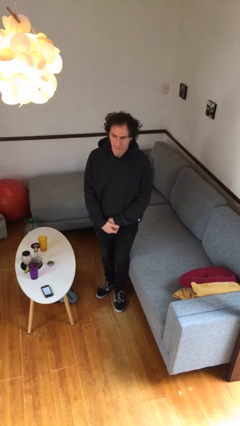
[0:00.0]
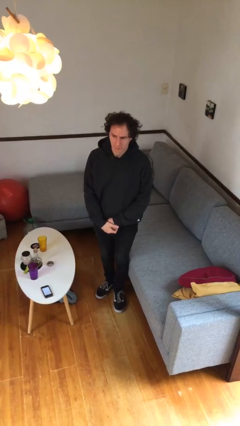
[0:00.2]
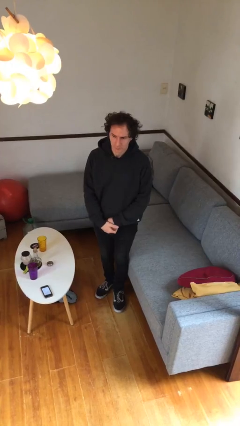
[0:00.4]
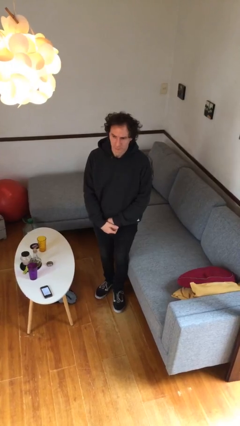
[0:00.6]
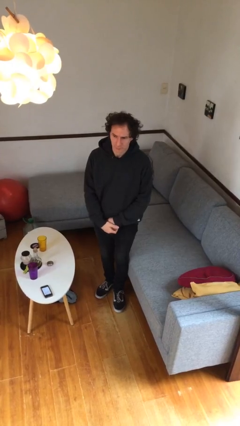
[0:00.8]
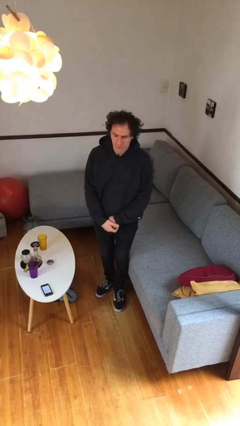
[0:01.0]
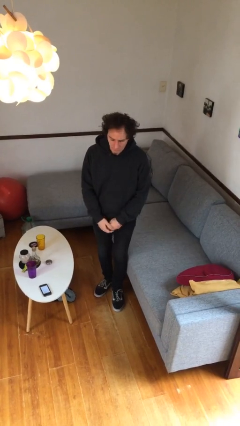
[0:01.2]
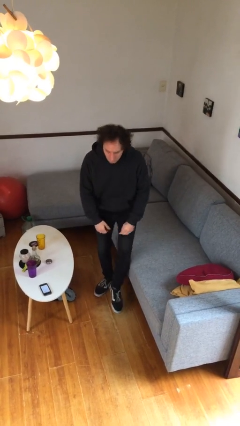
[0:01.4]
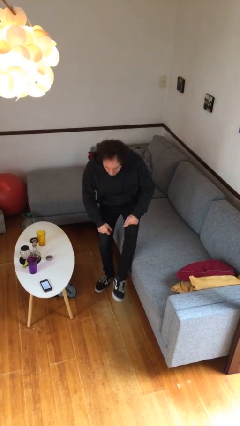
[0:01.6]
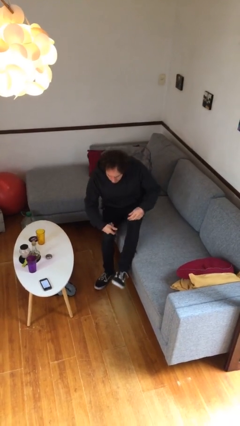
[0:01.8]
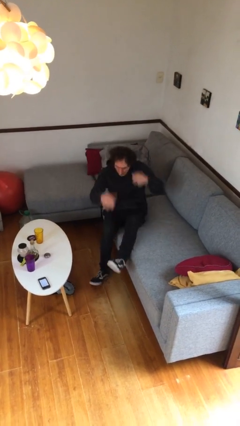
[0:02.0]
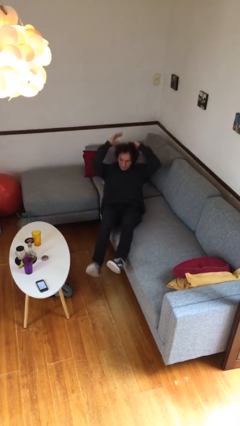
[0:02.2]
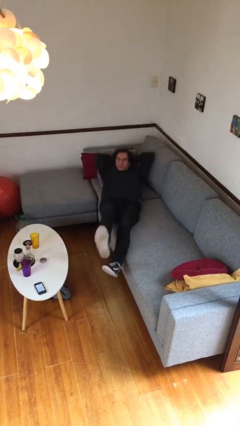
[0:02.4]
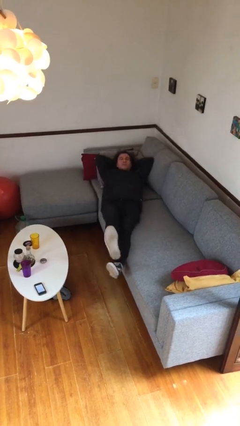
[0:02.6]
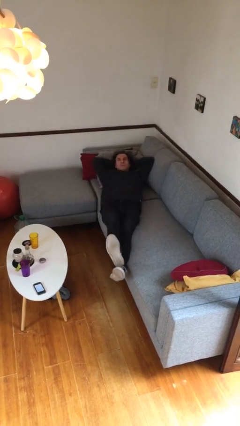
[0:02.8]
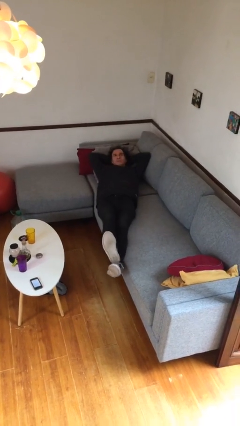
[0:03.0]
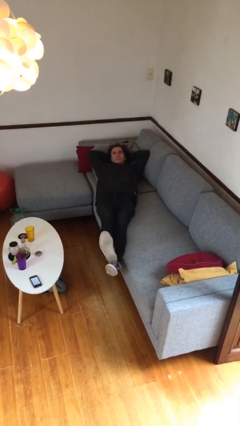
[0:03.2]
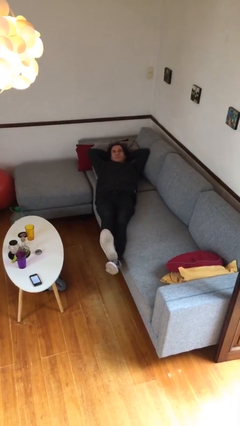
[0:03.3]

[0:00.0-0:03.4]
person lies down on couch

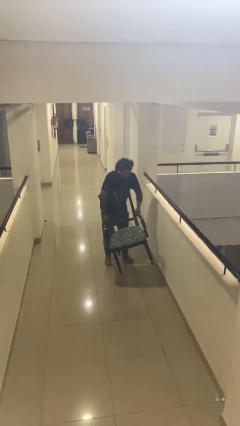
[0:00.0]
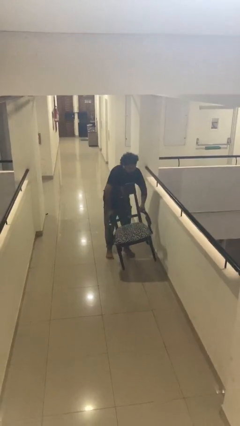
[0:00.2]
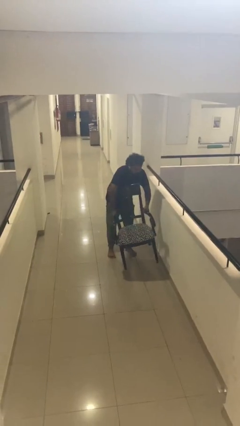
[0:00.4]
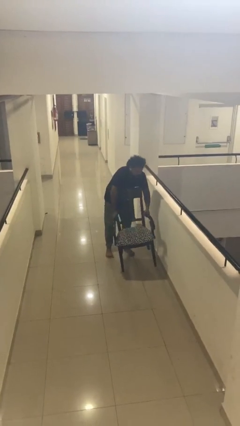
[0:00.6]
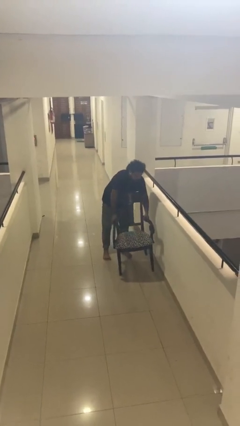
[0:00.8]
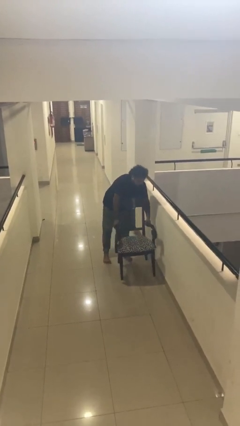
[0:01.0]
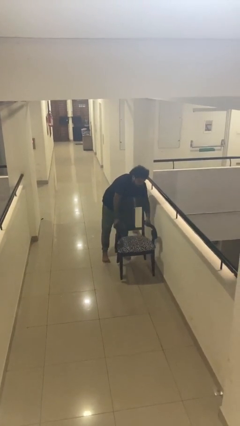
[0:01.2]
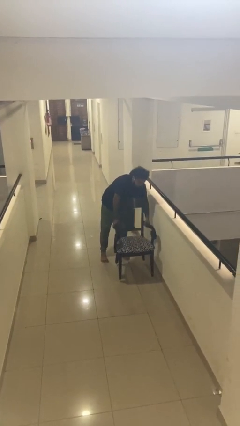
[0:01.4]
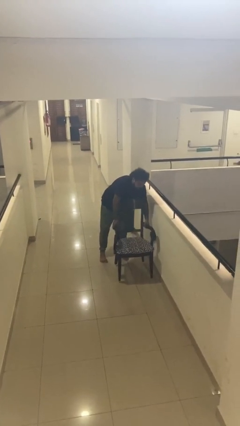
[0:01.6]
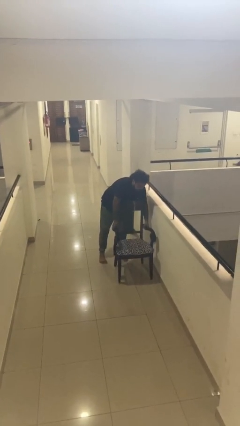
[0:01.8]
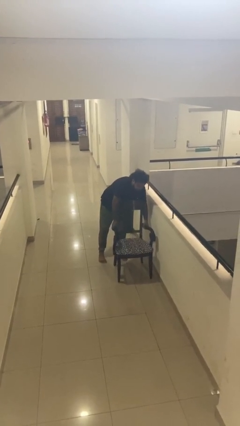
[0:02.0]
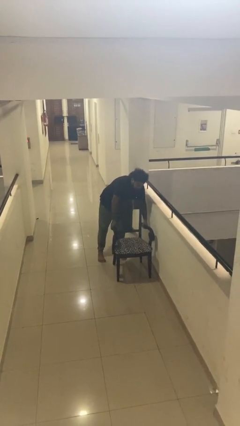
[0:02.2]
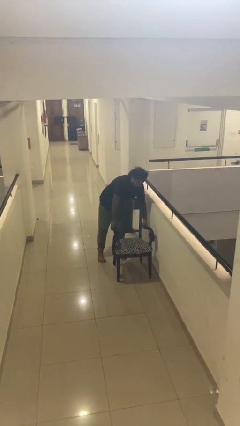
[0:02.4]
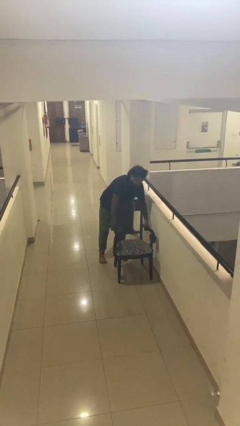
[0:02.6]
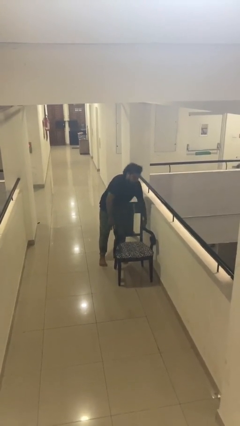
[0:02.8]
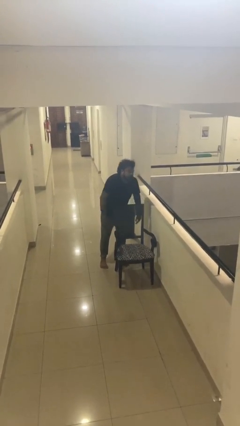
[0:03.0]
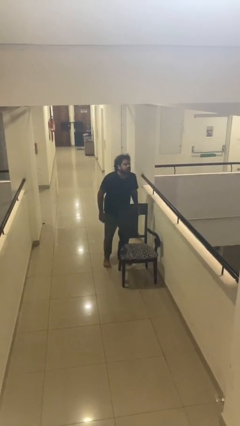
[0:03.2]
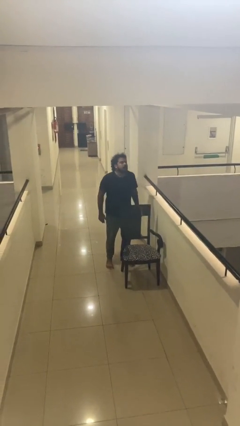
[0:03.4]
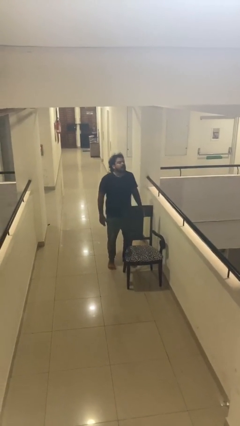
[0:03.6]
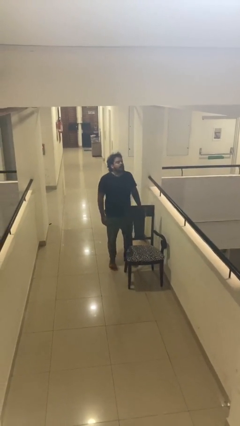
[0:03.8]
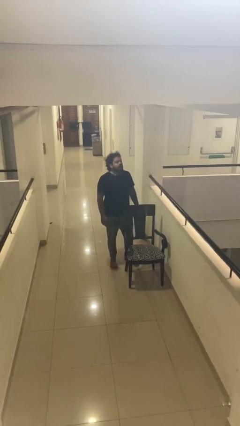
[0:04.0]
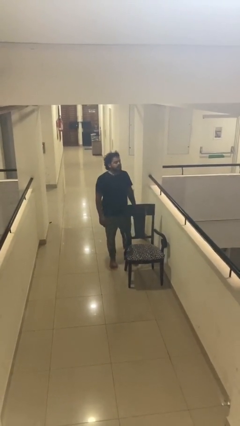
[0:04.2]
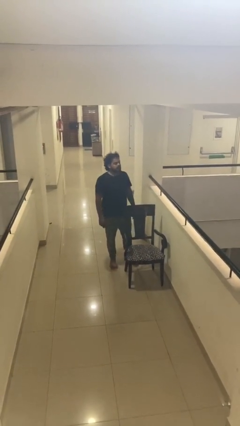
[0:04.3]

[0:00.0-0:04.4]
person puts down object on floor

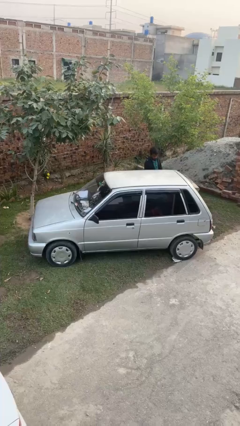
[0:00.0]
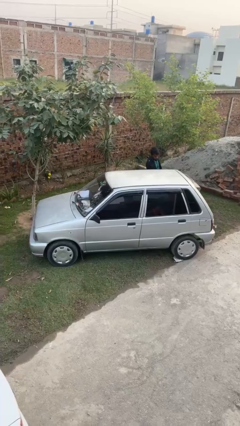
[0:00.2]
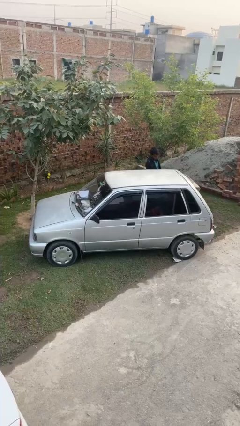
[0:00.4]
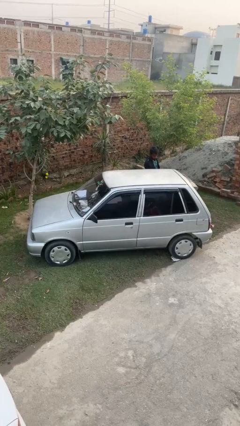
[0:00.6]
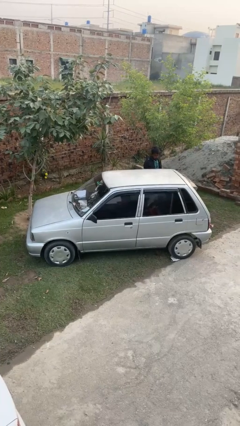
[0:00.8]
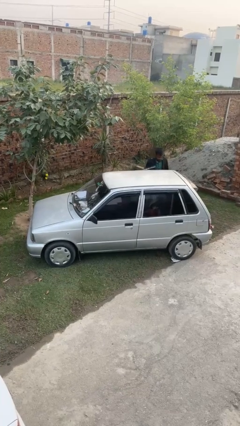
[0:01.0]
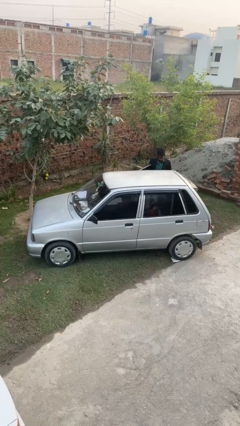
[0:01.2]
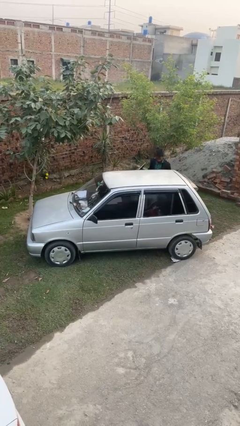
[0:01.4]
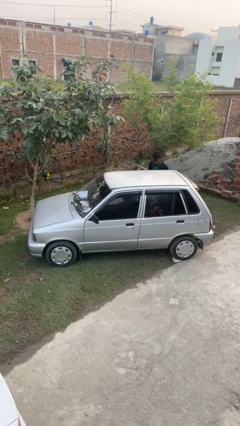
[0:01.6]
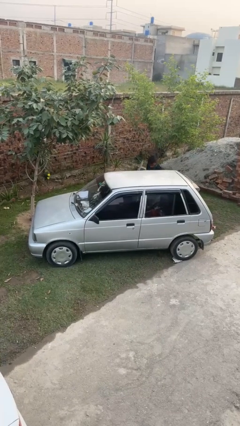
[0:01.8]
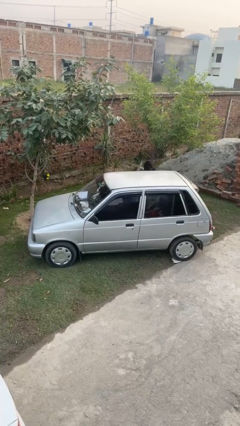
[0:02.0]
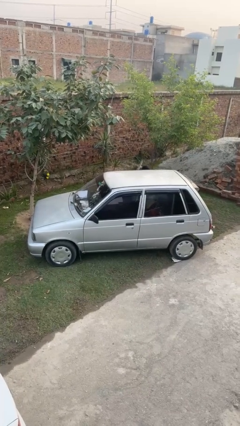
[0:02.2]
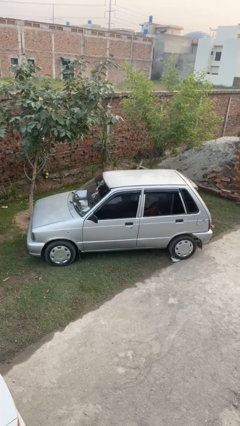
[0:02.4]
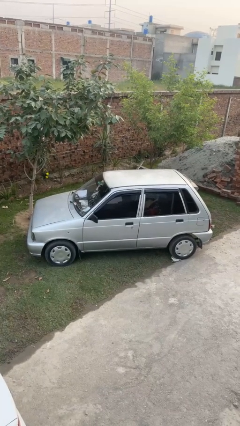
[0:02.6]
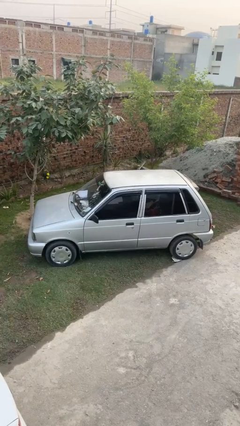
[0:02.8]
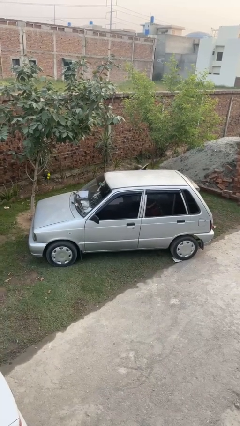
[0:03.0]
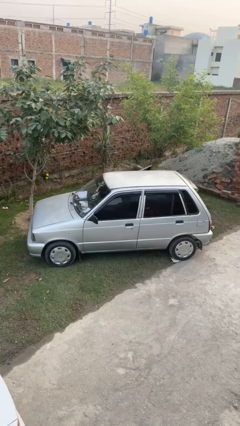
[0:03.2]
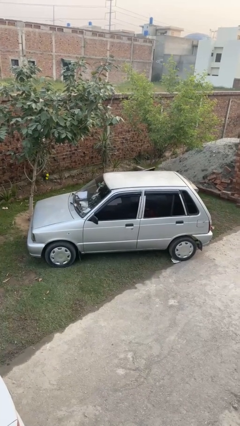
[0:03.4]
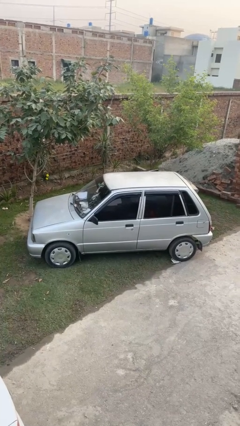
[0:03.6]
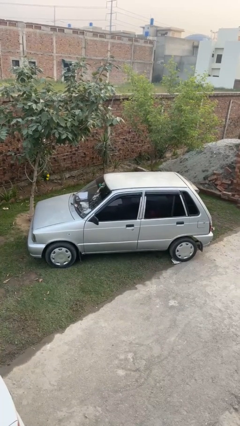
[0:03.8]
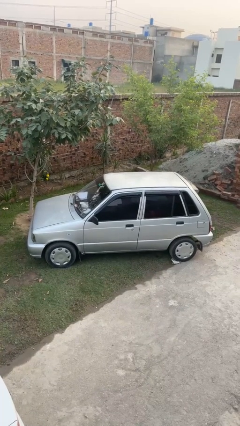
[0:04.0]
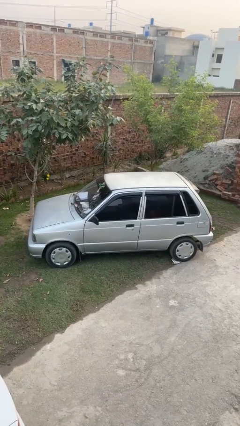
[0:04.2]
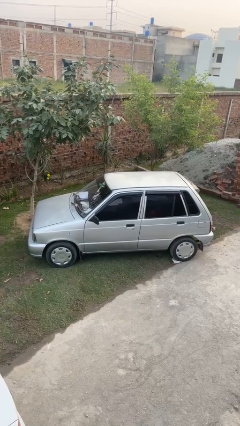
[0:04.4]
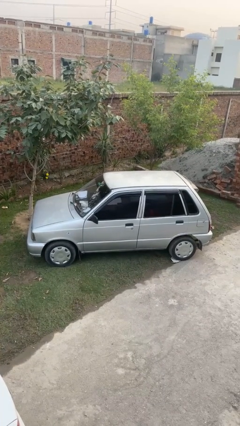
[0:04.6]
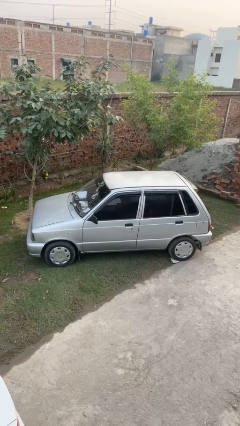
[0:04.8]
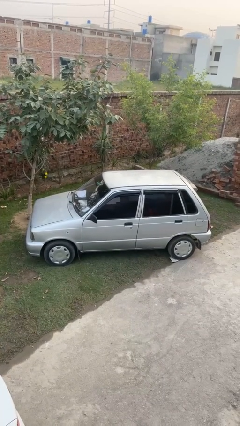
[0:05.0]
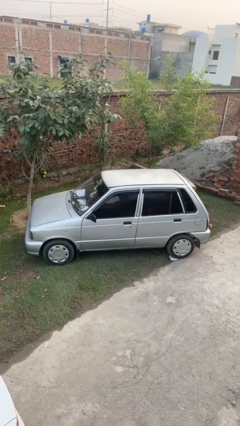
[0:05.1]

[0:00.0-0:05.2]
car picks up person

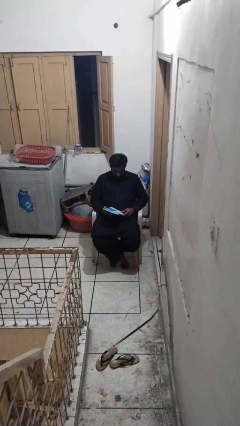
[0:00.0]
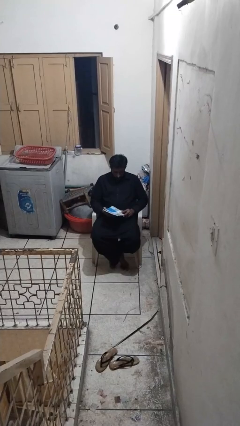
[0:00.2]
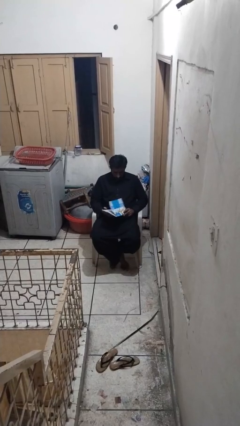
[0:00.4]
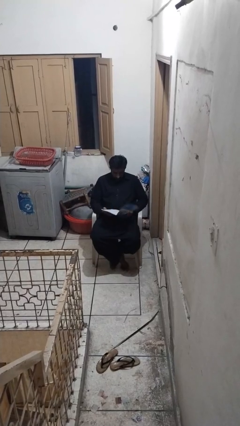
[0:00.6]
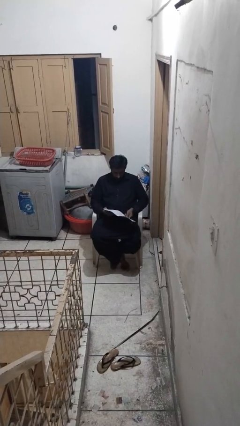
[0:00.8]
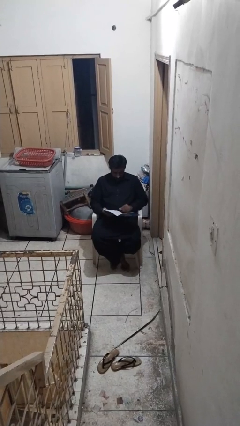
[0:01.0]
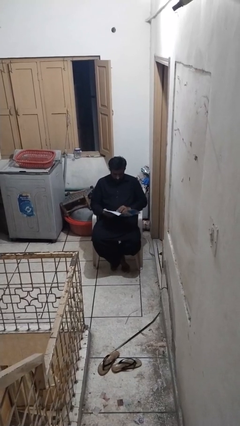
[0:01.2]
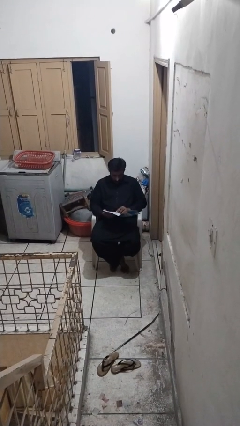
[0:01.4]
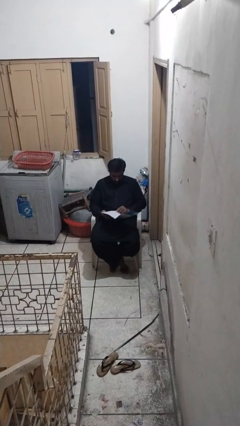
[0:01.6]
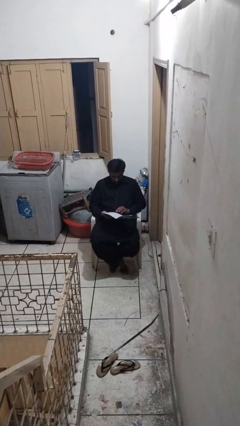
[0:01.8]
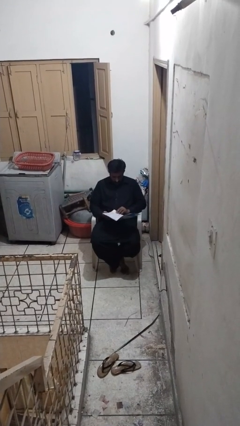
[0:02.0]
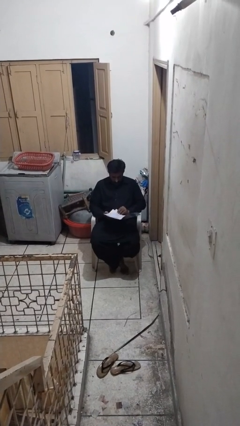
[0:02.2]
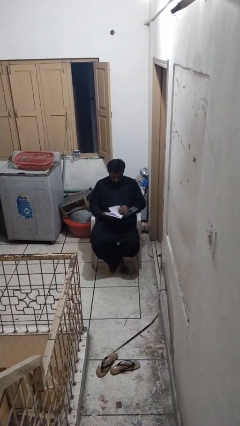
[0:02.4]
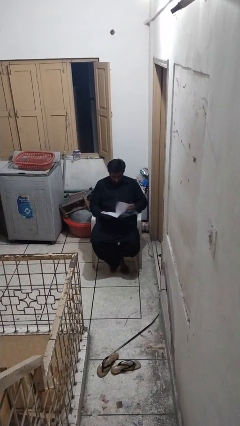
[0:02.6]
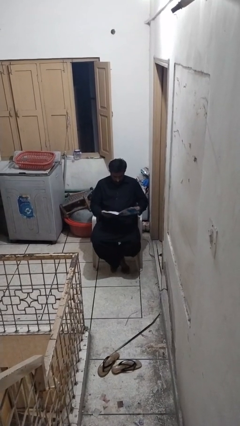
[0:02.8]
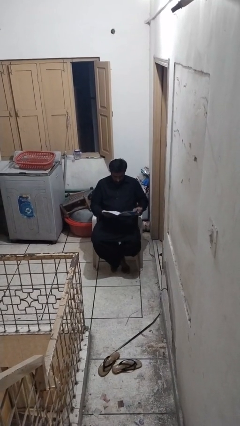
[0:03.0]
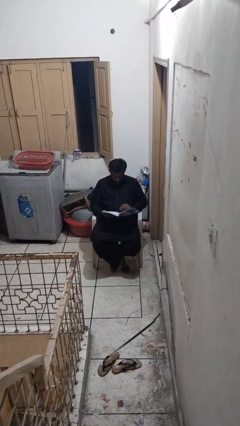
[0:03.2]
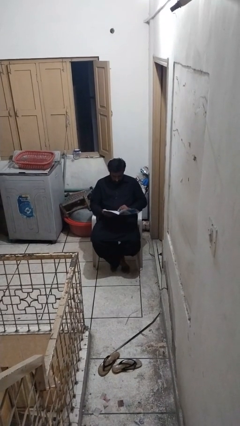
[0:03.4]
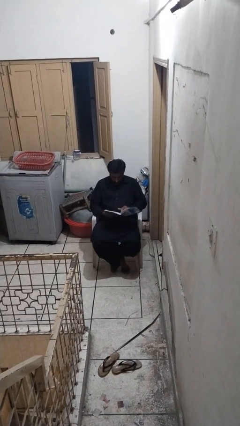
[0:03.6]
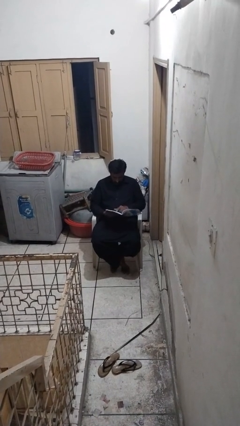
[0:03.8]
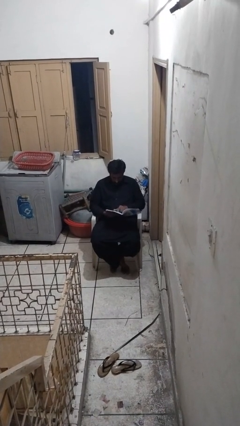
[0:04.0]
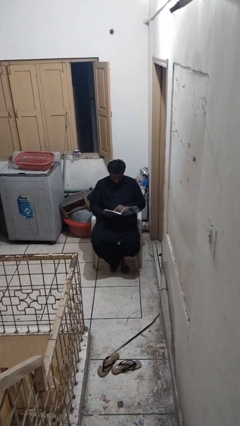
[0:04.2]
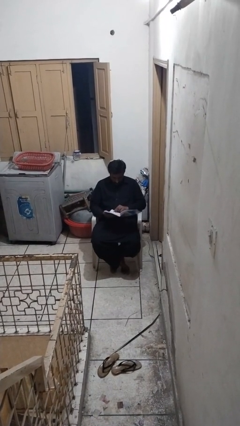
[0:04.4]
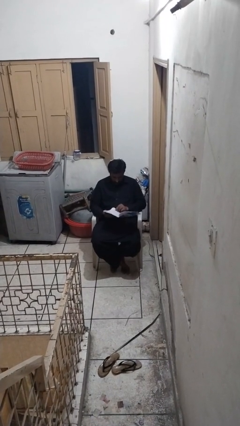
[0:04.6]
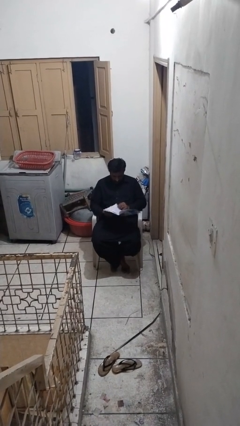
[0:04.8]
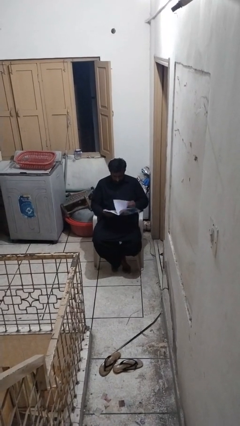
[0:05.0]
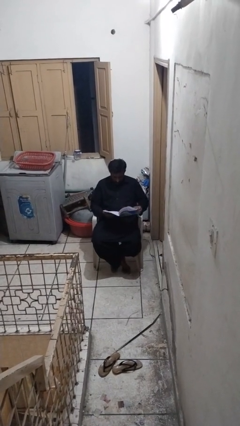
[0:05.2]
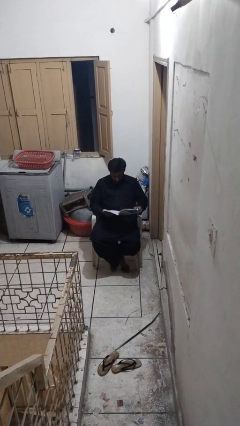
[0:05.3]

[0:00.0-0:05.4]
person reads book
